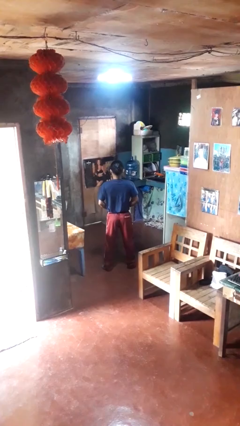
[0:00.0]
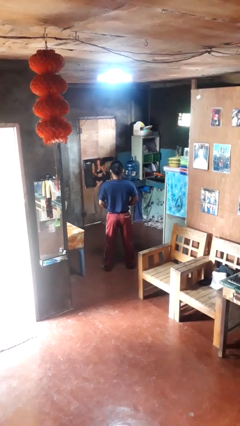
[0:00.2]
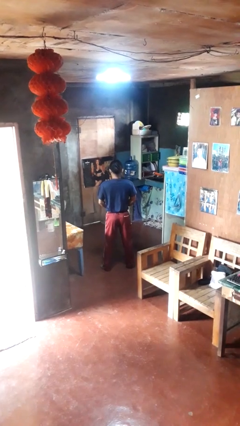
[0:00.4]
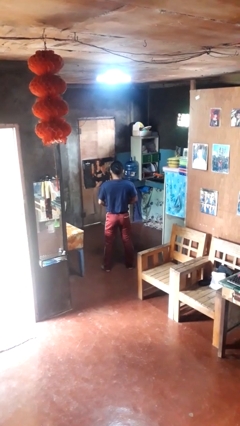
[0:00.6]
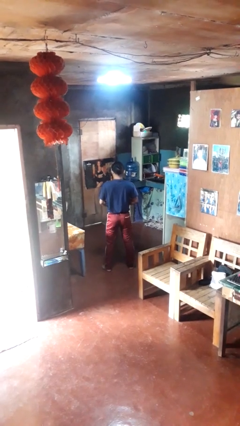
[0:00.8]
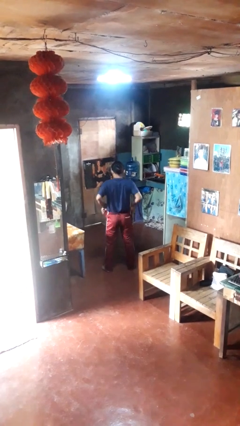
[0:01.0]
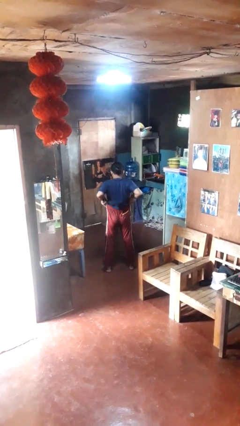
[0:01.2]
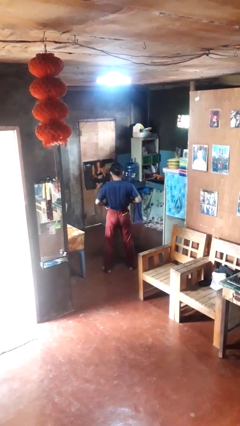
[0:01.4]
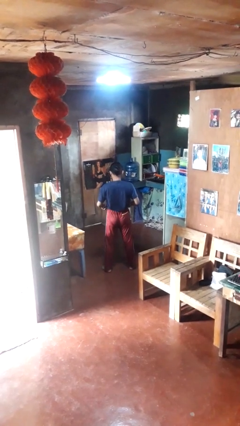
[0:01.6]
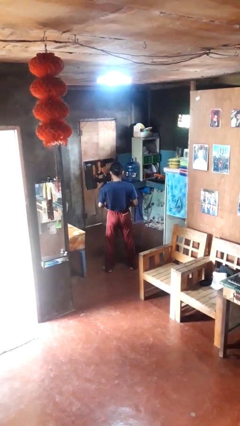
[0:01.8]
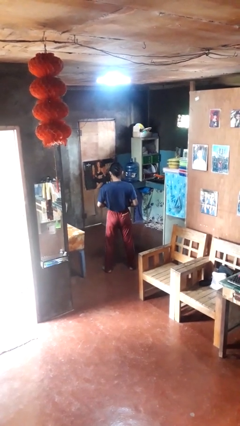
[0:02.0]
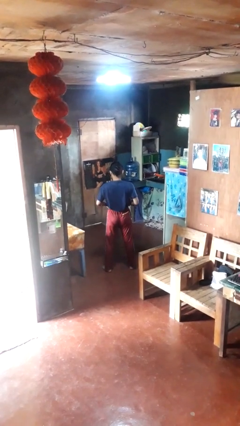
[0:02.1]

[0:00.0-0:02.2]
person hikes up pants

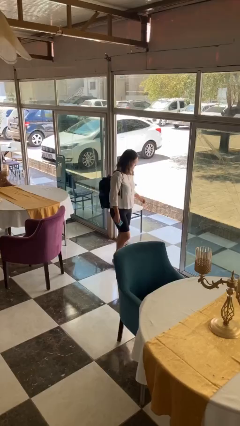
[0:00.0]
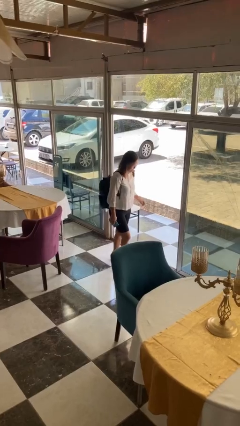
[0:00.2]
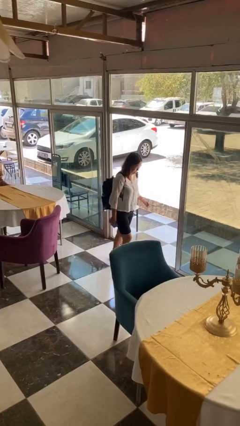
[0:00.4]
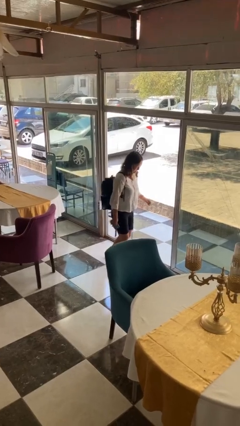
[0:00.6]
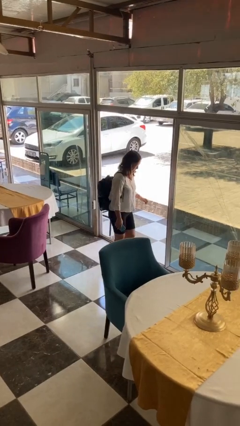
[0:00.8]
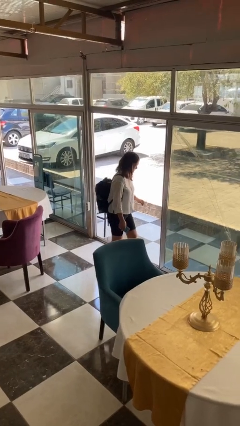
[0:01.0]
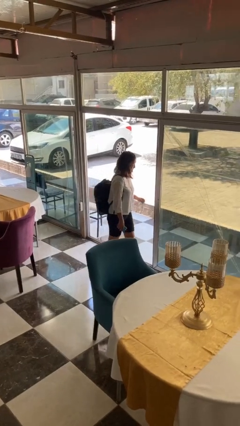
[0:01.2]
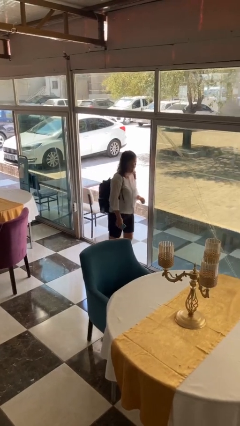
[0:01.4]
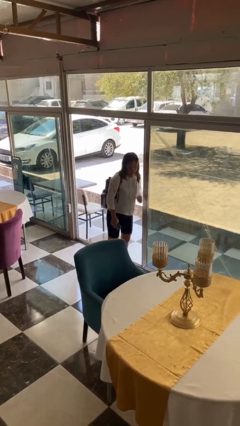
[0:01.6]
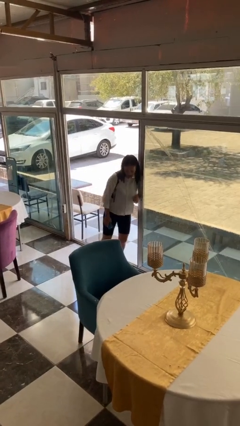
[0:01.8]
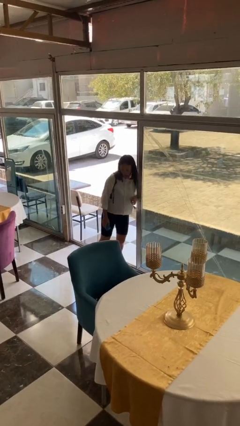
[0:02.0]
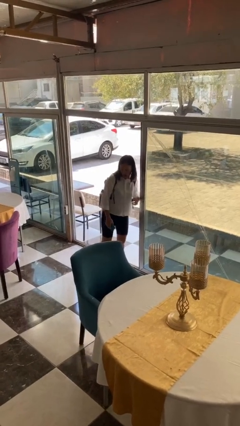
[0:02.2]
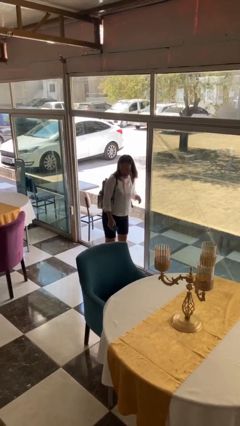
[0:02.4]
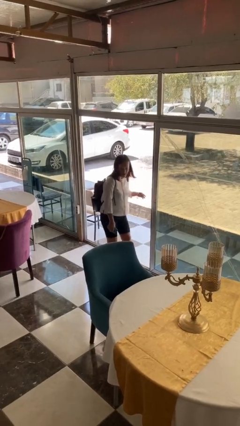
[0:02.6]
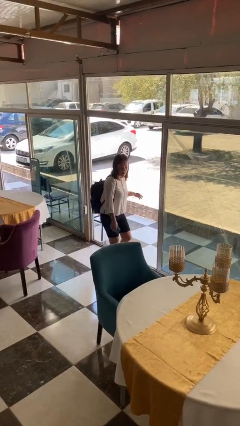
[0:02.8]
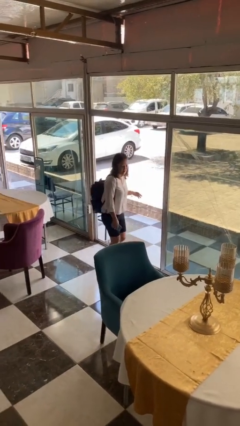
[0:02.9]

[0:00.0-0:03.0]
person bumps into wall

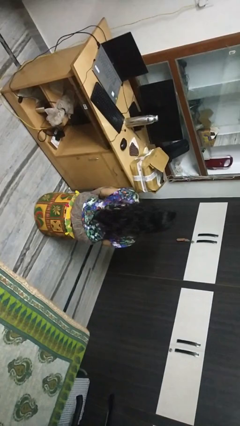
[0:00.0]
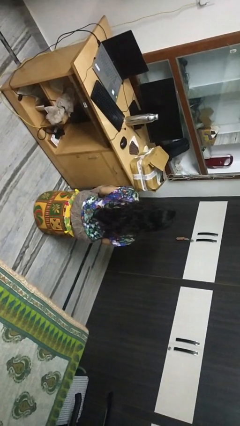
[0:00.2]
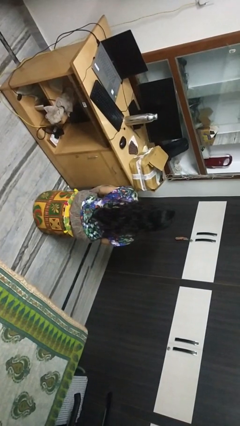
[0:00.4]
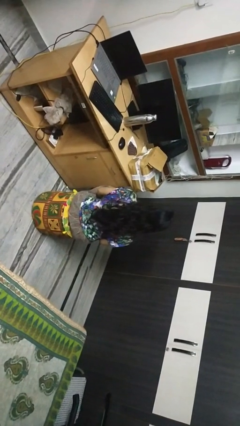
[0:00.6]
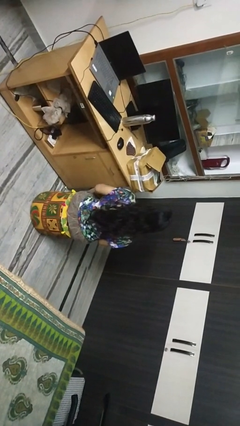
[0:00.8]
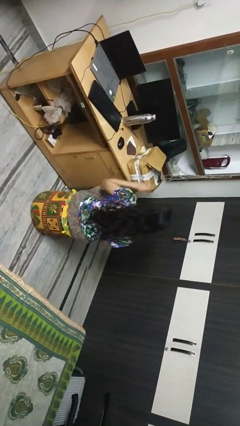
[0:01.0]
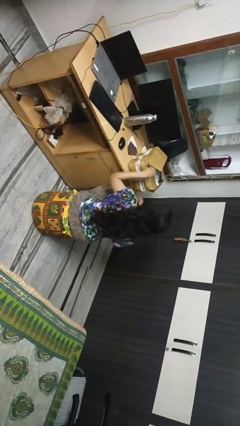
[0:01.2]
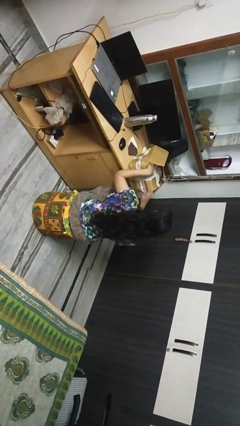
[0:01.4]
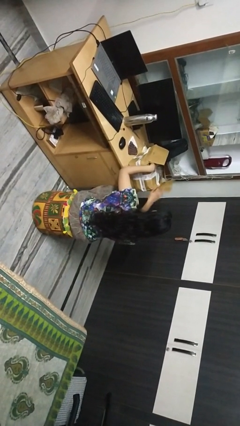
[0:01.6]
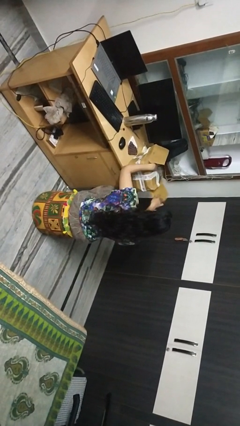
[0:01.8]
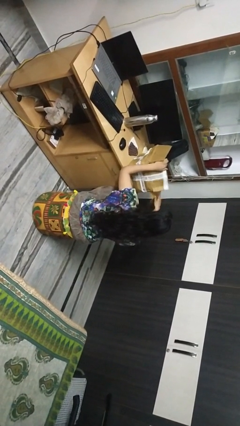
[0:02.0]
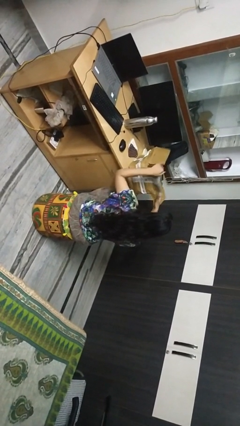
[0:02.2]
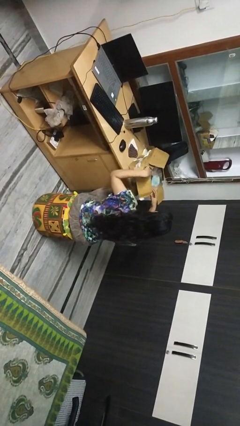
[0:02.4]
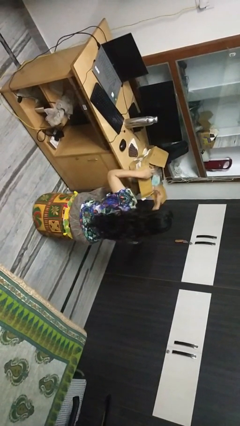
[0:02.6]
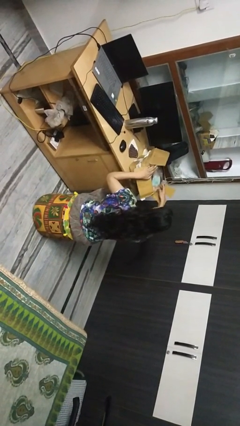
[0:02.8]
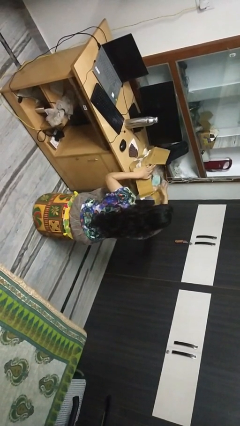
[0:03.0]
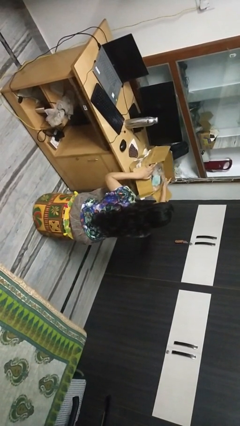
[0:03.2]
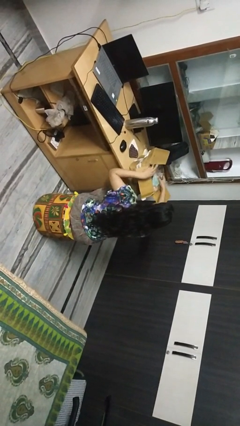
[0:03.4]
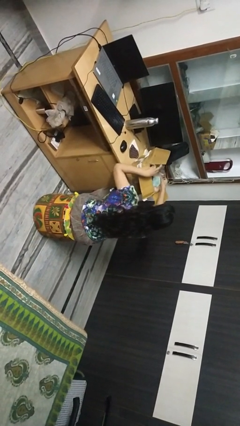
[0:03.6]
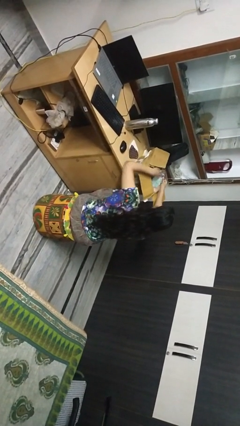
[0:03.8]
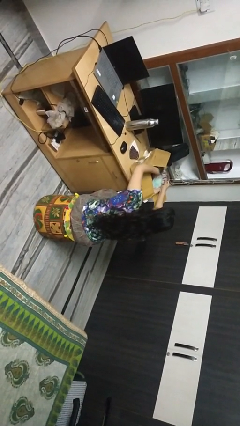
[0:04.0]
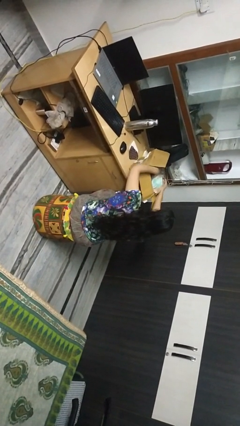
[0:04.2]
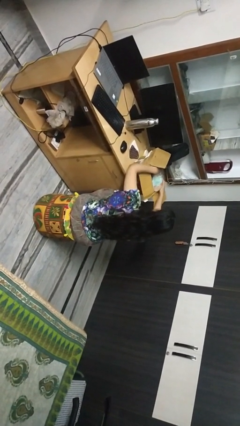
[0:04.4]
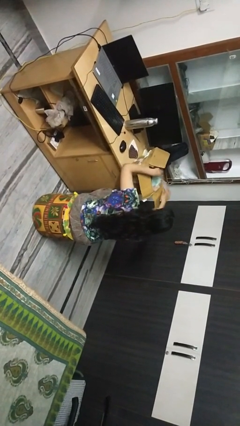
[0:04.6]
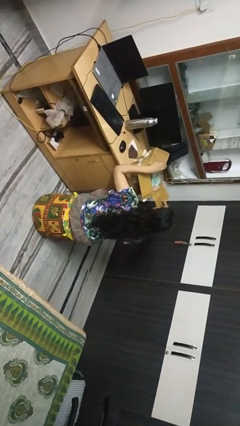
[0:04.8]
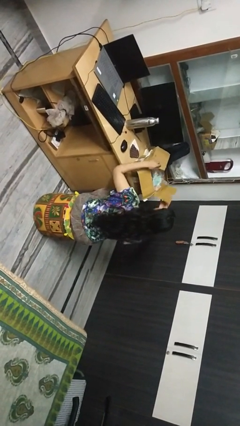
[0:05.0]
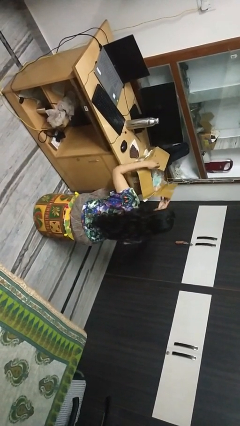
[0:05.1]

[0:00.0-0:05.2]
person searches in box

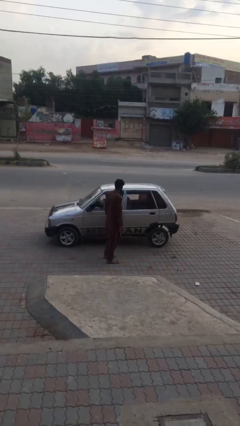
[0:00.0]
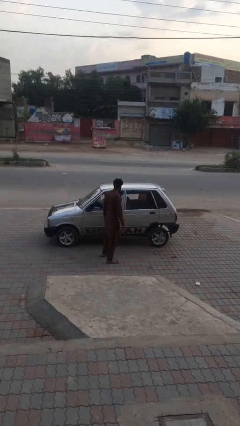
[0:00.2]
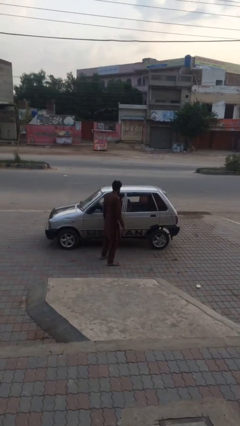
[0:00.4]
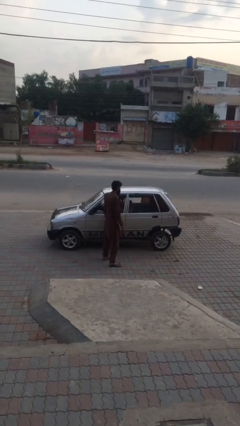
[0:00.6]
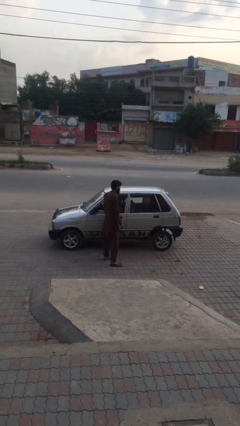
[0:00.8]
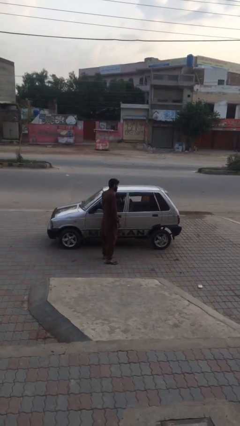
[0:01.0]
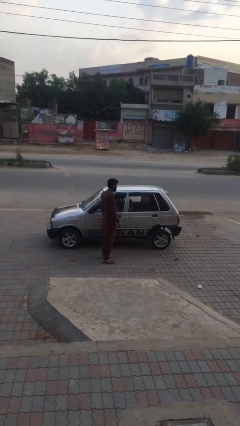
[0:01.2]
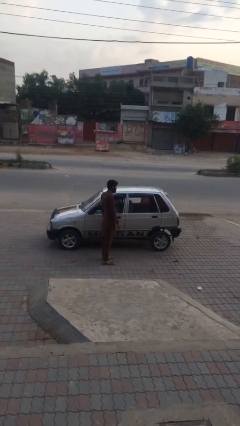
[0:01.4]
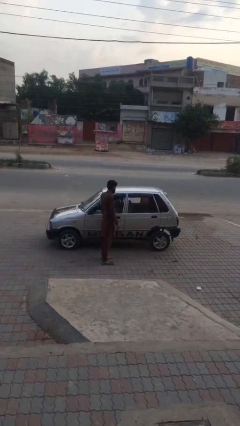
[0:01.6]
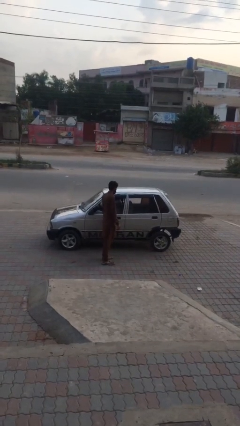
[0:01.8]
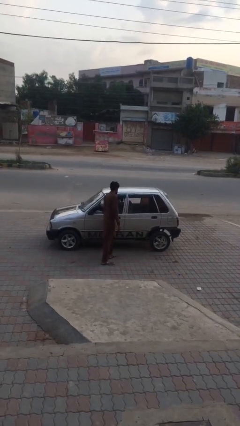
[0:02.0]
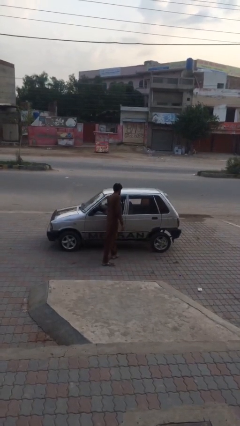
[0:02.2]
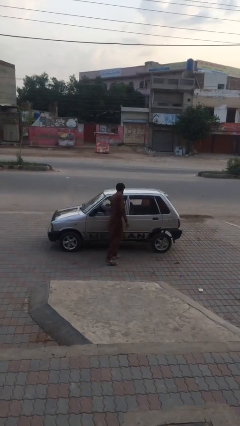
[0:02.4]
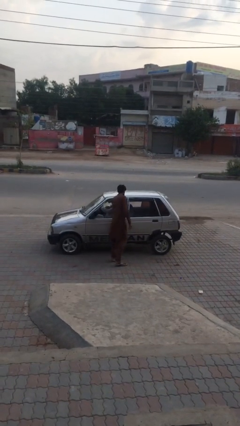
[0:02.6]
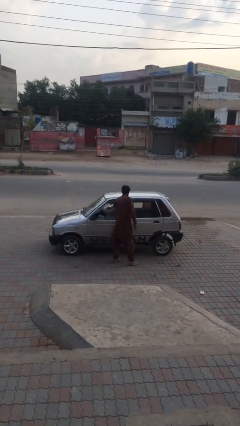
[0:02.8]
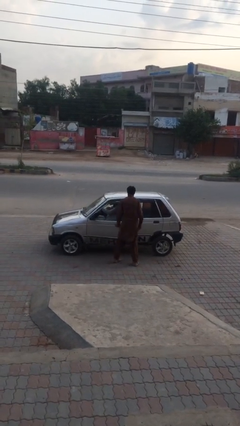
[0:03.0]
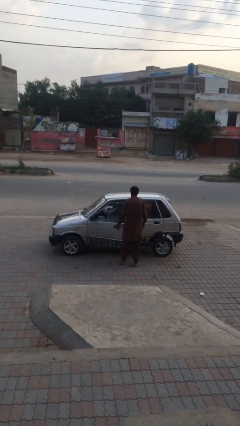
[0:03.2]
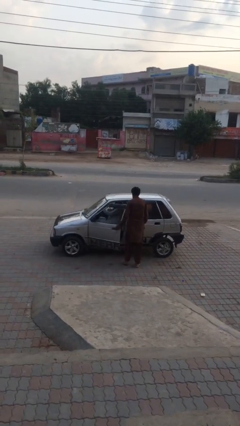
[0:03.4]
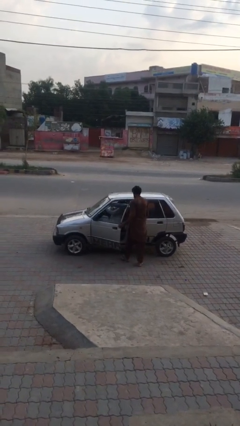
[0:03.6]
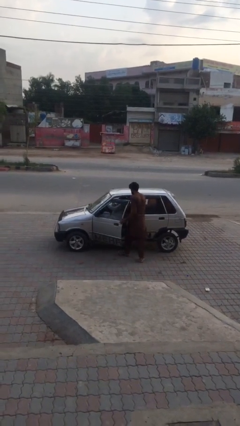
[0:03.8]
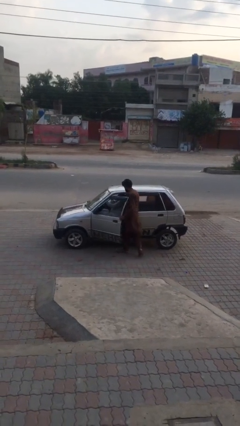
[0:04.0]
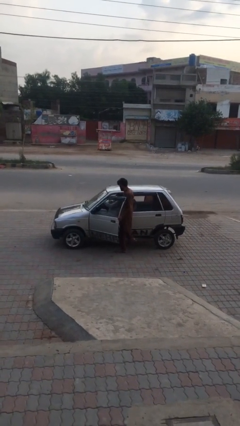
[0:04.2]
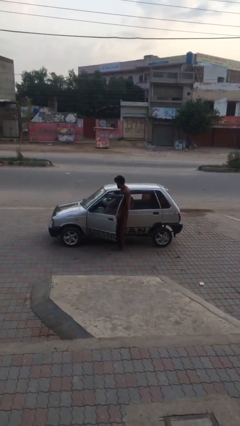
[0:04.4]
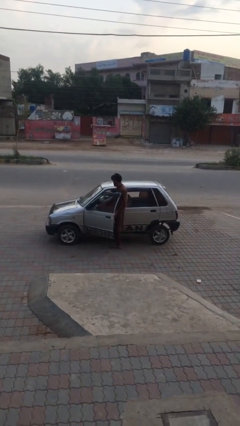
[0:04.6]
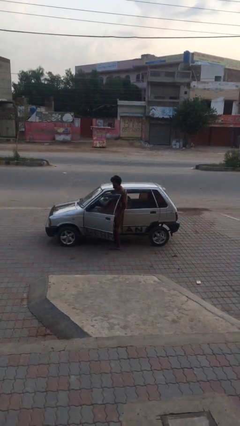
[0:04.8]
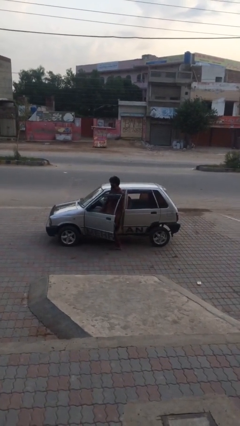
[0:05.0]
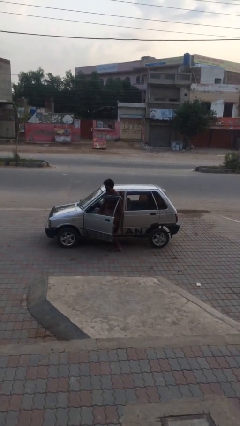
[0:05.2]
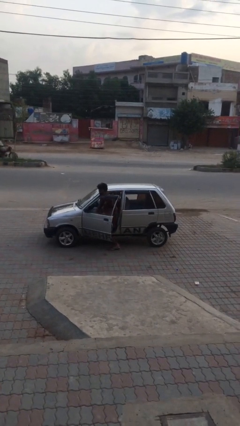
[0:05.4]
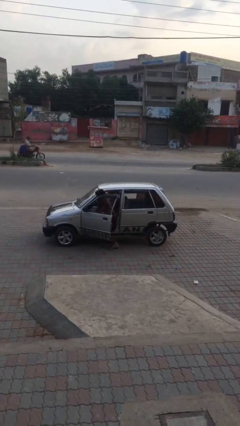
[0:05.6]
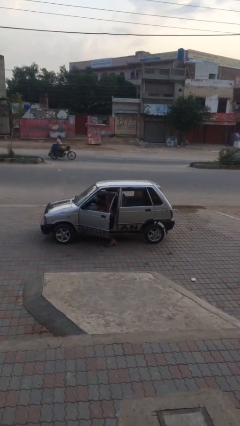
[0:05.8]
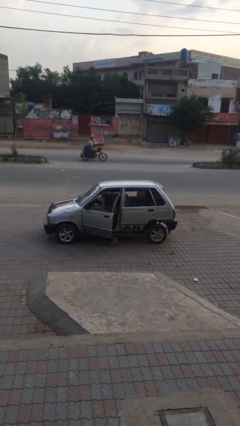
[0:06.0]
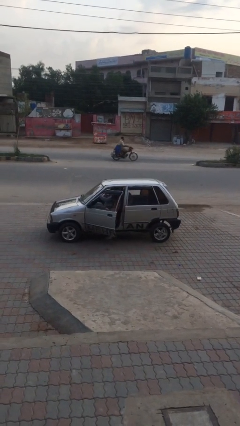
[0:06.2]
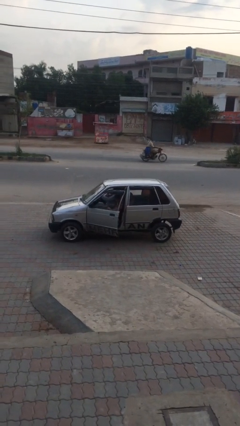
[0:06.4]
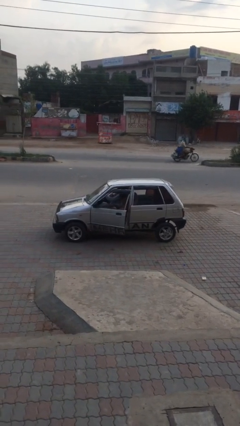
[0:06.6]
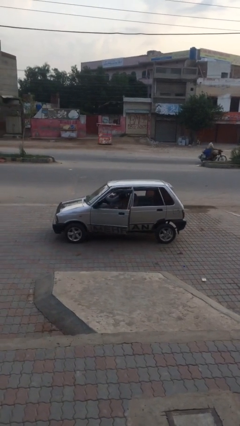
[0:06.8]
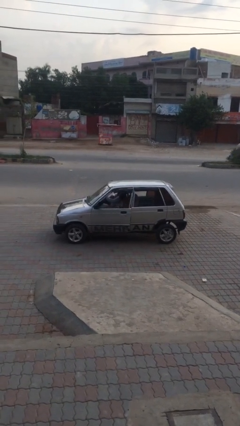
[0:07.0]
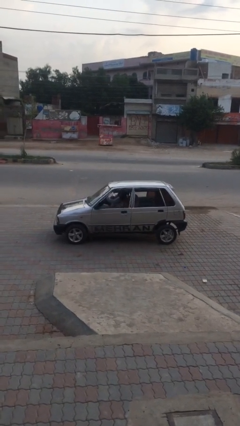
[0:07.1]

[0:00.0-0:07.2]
car picks up person
